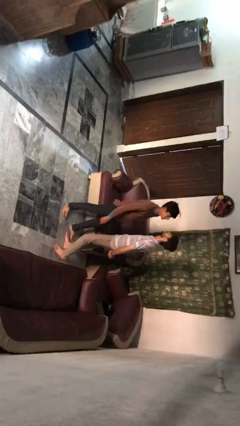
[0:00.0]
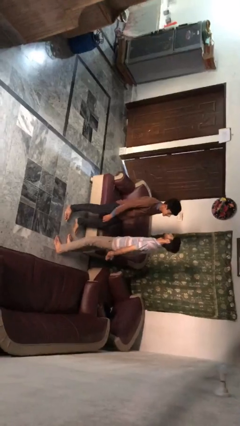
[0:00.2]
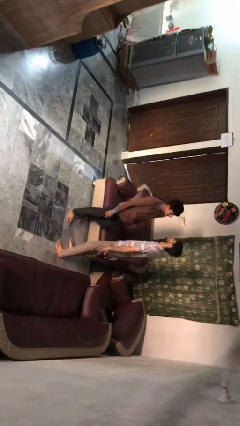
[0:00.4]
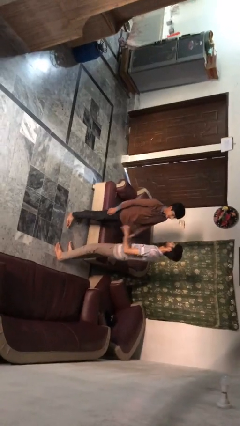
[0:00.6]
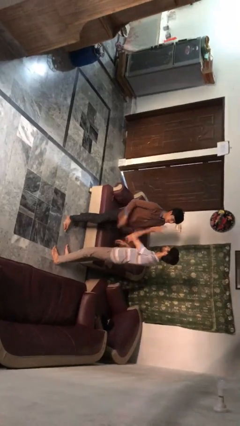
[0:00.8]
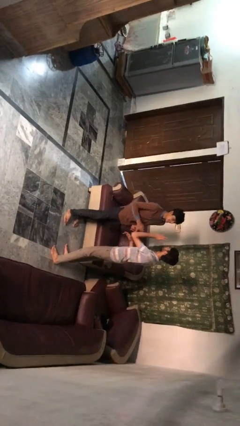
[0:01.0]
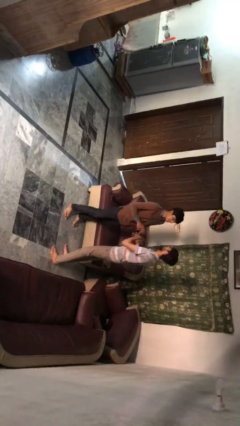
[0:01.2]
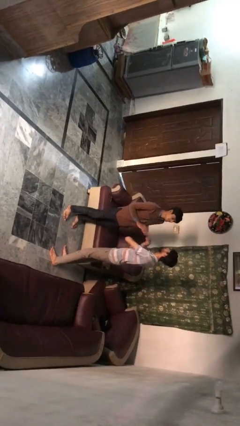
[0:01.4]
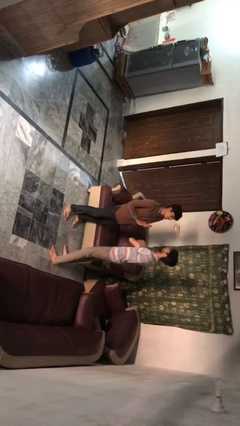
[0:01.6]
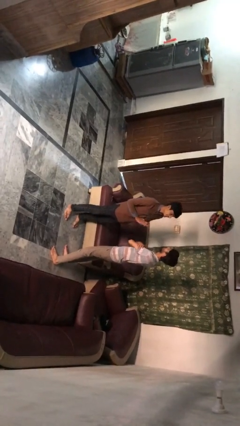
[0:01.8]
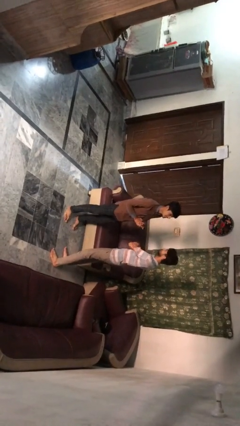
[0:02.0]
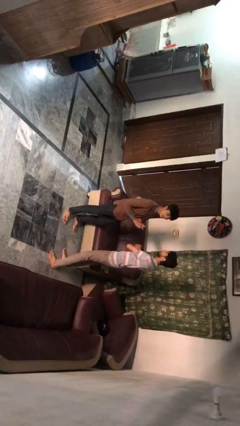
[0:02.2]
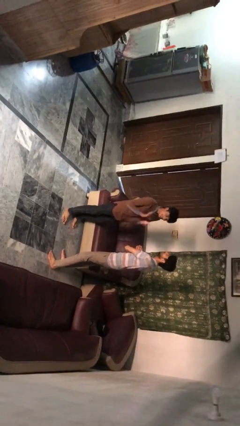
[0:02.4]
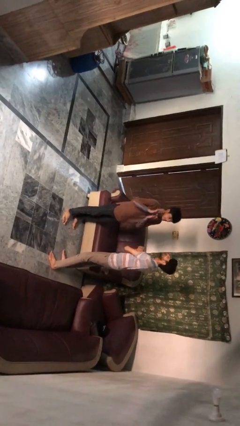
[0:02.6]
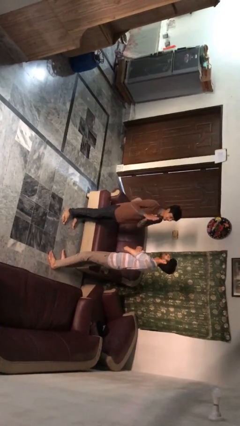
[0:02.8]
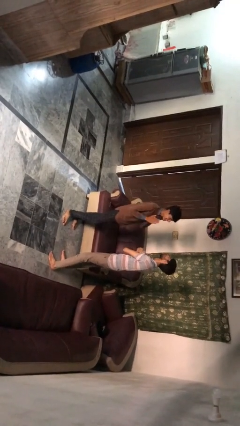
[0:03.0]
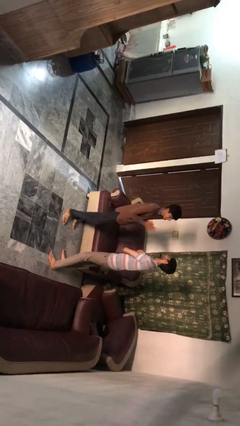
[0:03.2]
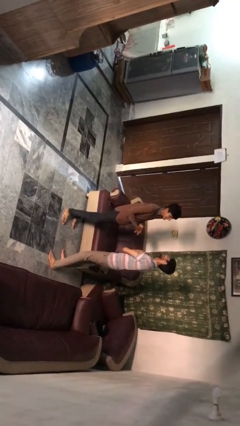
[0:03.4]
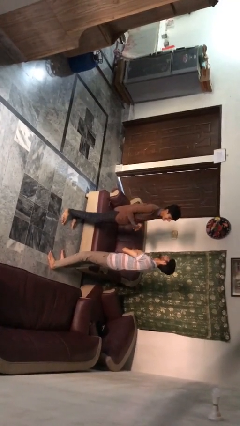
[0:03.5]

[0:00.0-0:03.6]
person talks to person

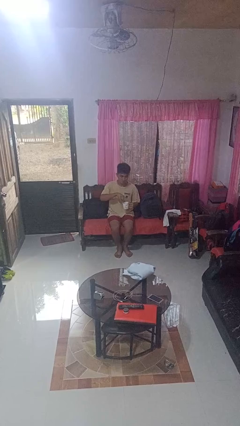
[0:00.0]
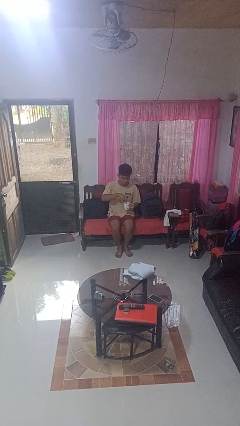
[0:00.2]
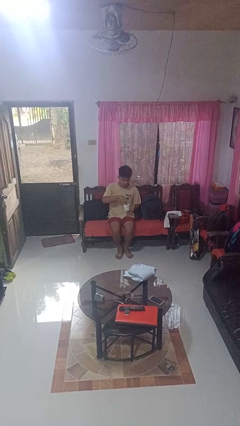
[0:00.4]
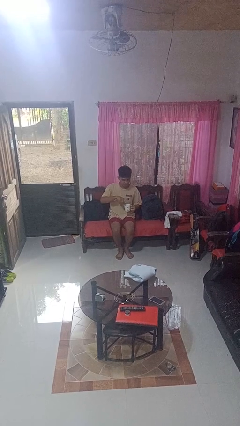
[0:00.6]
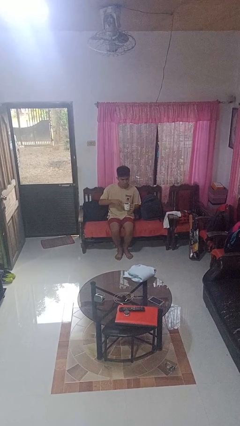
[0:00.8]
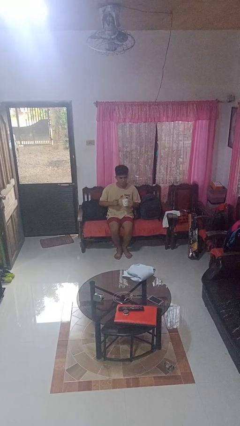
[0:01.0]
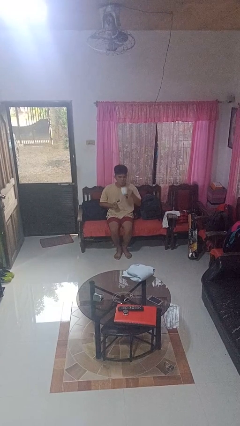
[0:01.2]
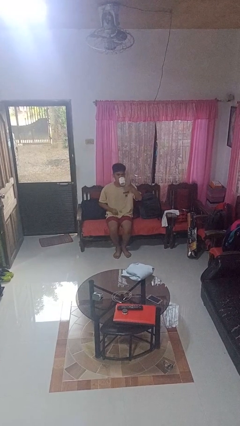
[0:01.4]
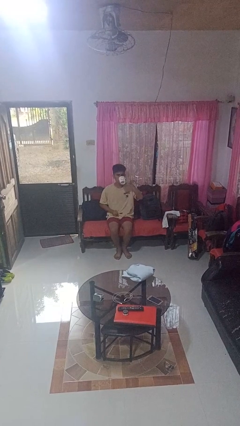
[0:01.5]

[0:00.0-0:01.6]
person stirs mug

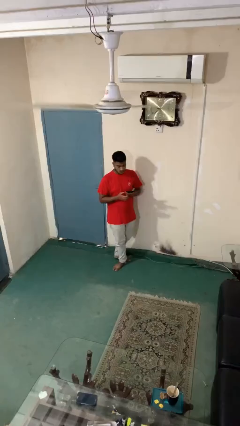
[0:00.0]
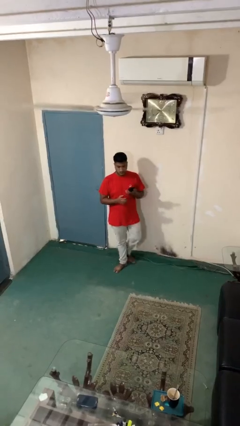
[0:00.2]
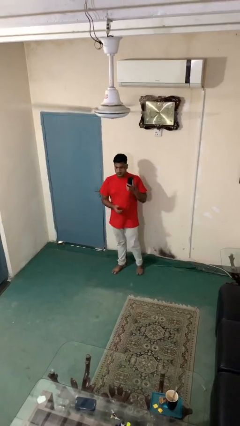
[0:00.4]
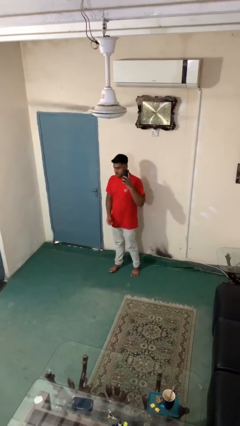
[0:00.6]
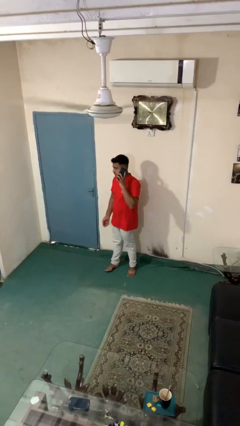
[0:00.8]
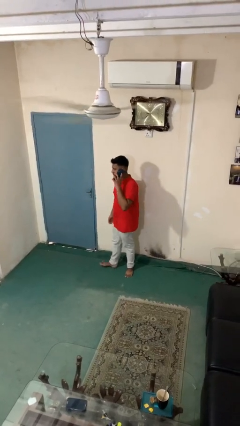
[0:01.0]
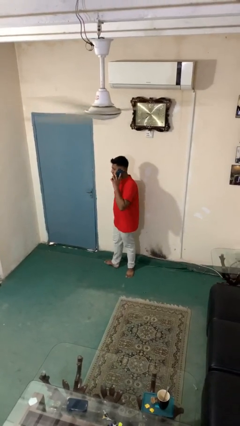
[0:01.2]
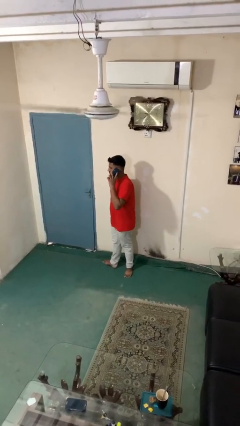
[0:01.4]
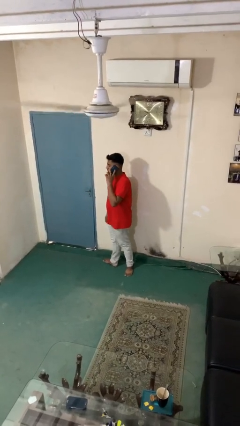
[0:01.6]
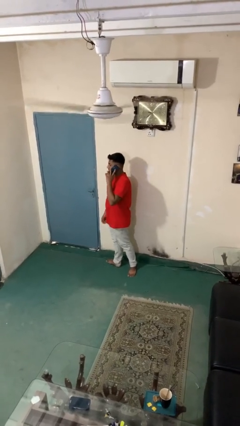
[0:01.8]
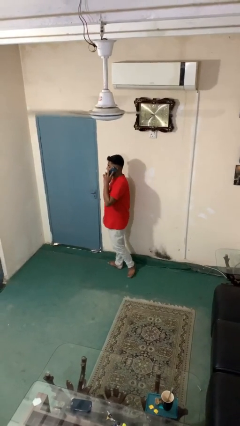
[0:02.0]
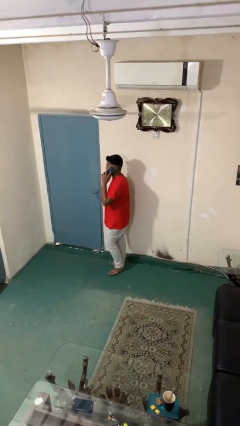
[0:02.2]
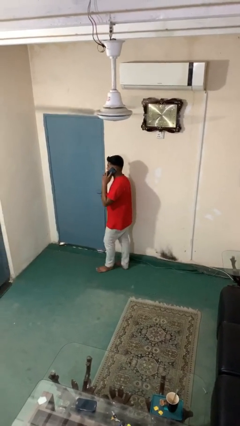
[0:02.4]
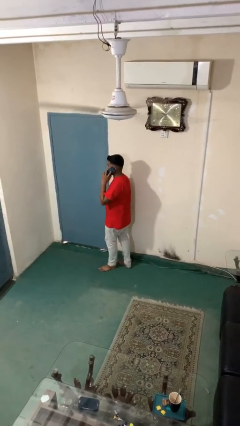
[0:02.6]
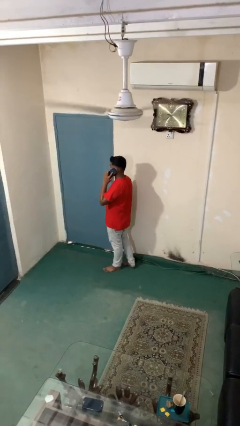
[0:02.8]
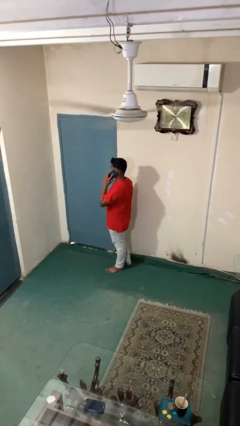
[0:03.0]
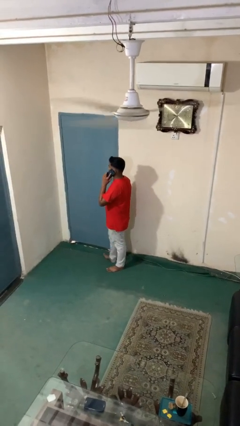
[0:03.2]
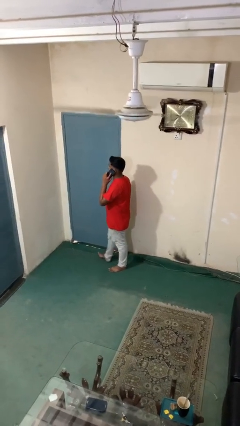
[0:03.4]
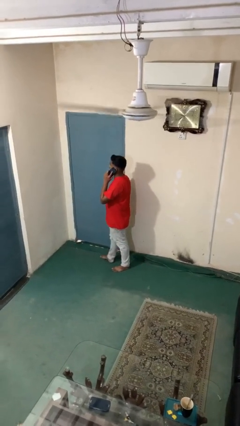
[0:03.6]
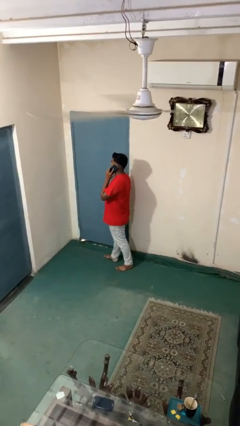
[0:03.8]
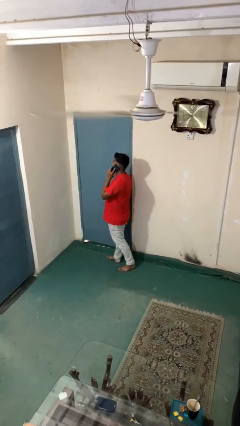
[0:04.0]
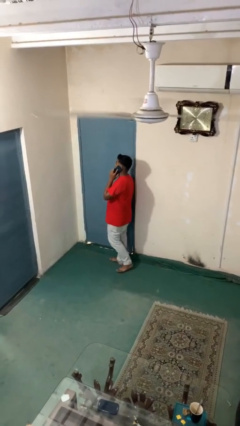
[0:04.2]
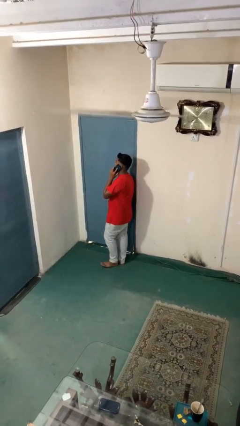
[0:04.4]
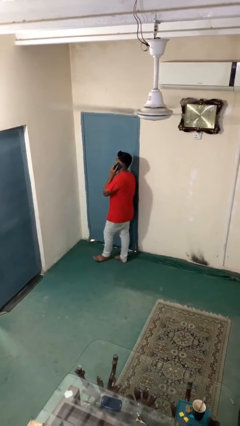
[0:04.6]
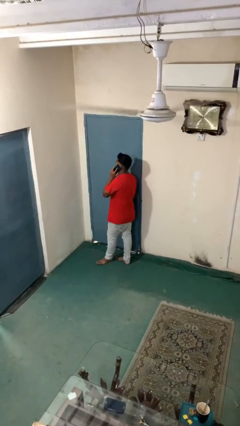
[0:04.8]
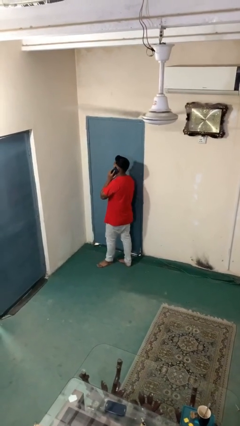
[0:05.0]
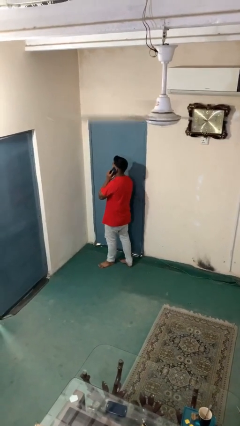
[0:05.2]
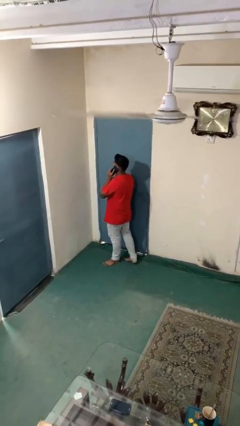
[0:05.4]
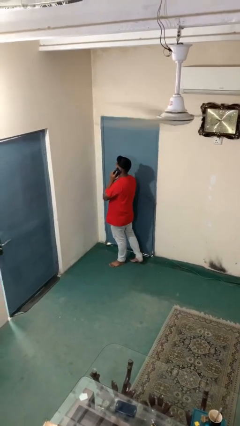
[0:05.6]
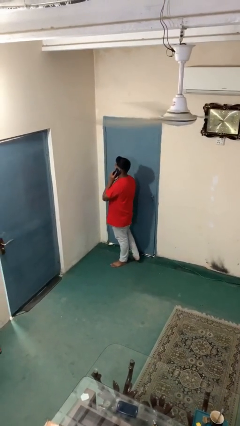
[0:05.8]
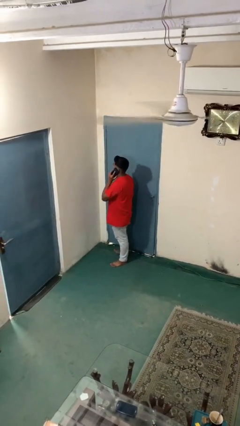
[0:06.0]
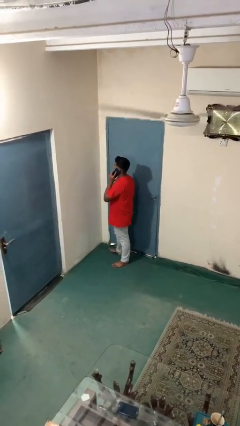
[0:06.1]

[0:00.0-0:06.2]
person talks on phone

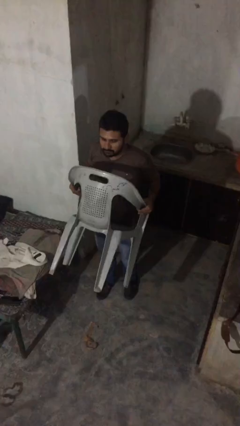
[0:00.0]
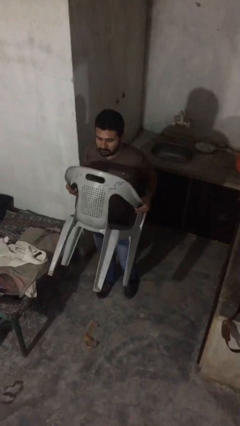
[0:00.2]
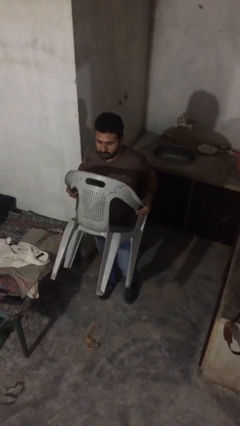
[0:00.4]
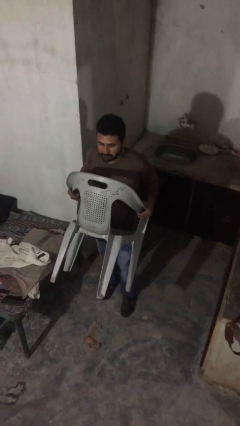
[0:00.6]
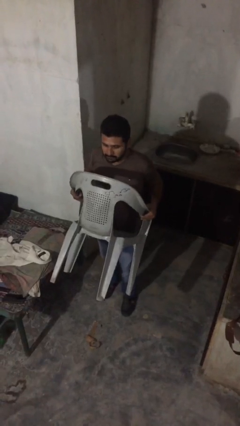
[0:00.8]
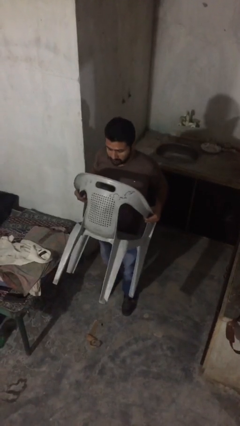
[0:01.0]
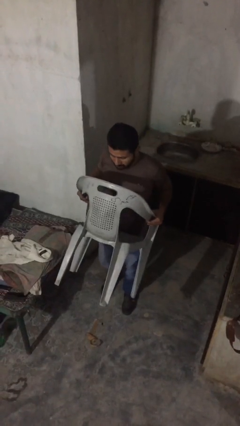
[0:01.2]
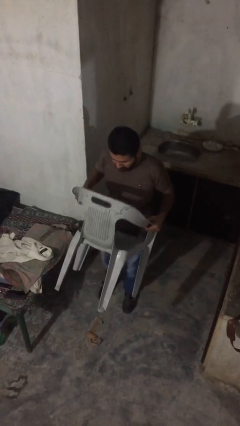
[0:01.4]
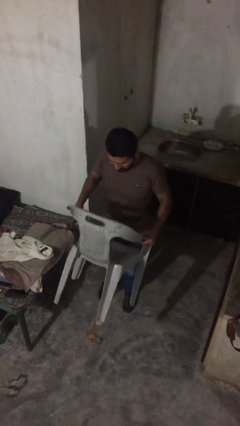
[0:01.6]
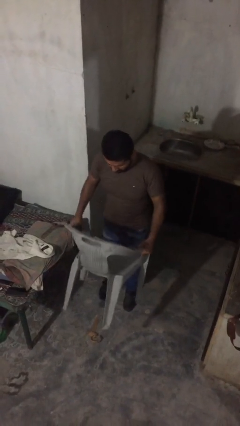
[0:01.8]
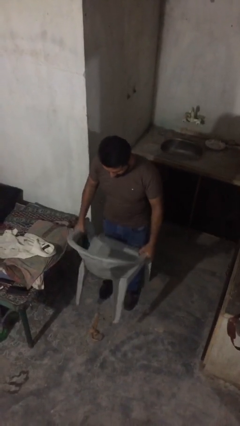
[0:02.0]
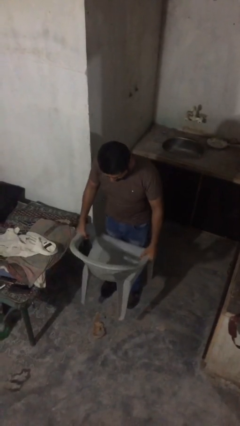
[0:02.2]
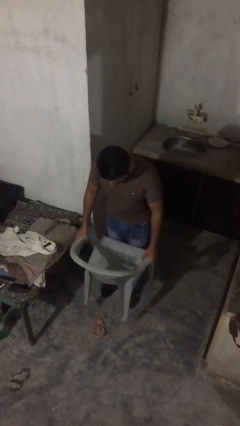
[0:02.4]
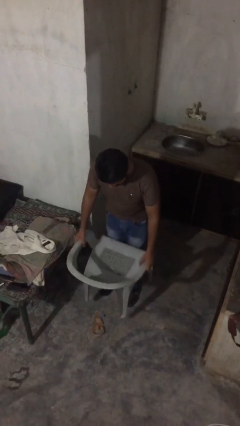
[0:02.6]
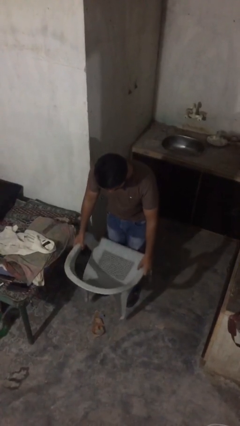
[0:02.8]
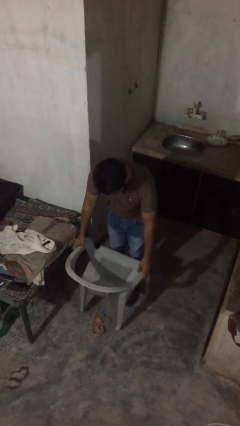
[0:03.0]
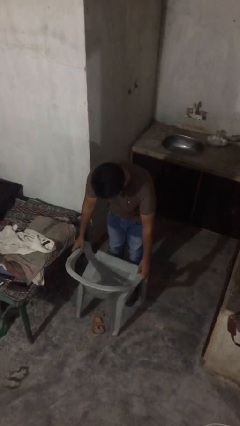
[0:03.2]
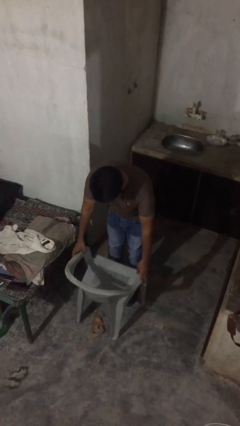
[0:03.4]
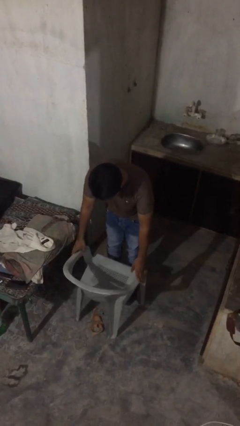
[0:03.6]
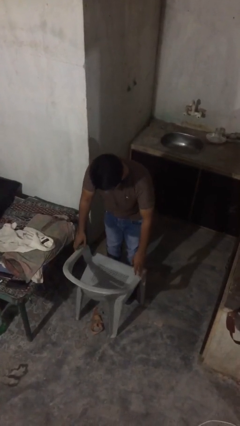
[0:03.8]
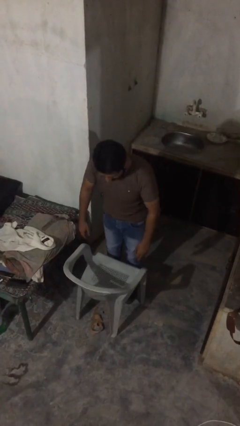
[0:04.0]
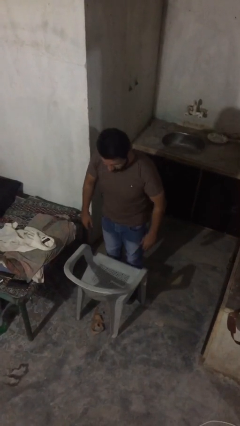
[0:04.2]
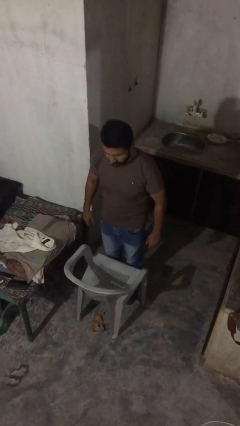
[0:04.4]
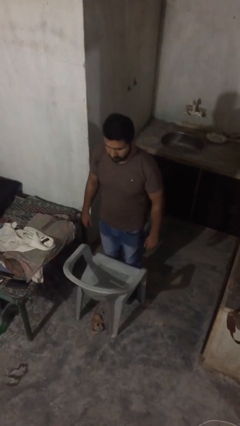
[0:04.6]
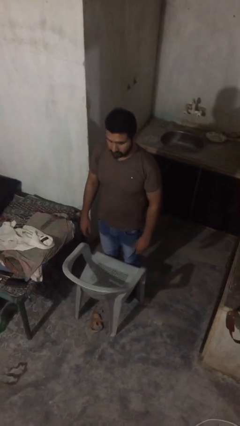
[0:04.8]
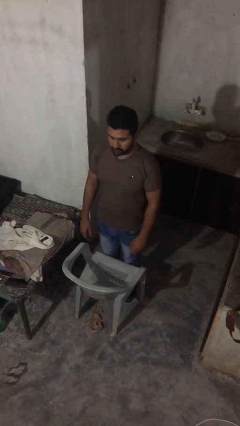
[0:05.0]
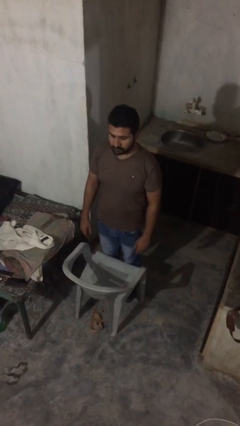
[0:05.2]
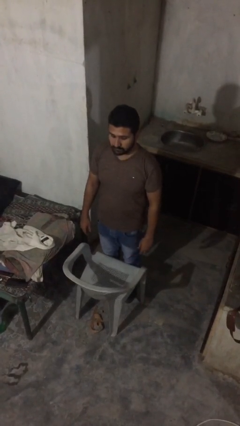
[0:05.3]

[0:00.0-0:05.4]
person puts down object on floor

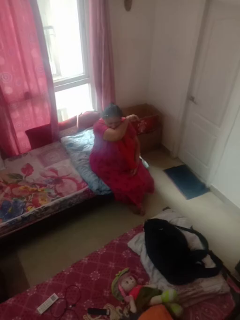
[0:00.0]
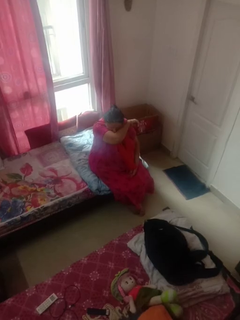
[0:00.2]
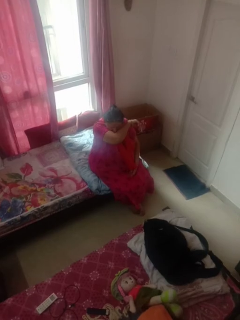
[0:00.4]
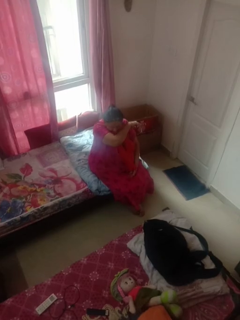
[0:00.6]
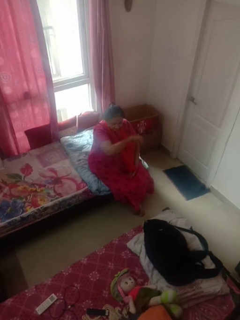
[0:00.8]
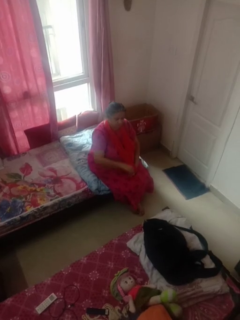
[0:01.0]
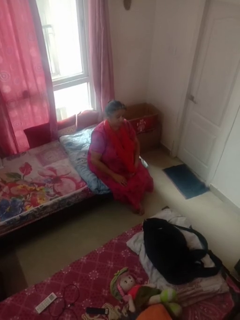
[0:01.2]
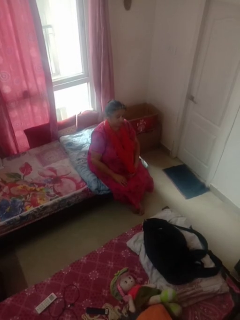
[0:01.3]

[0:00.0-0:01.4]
person sneezes into arm
